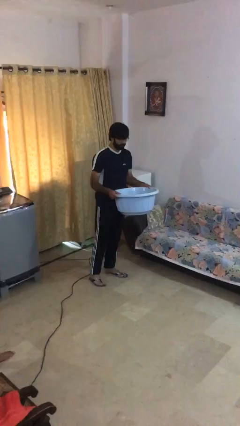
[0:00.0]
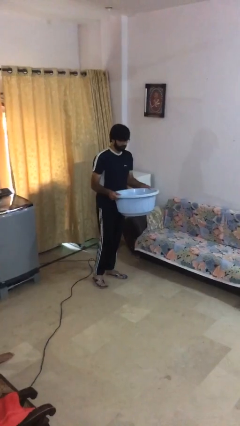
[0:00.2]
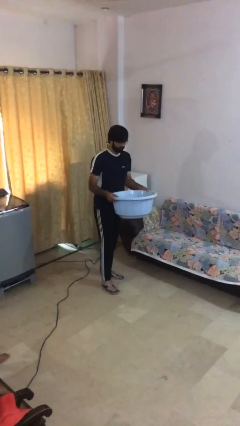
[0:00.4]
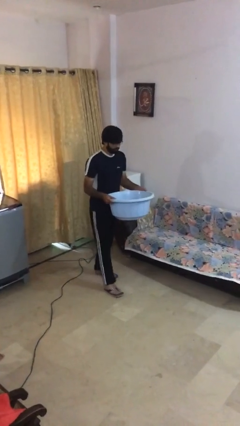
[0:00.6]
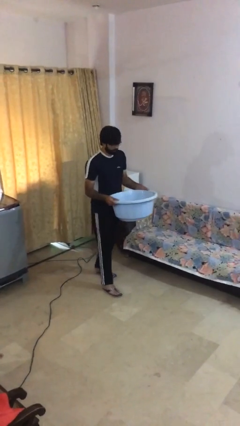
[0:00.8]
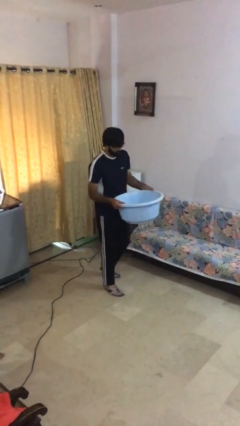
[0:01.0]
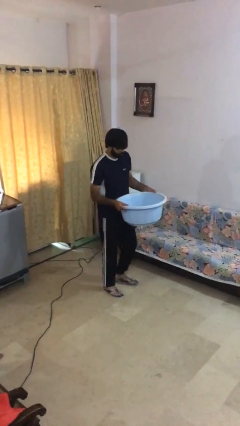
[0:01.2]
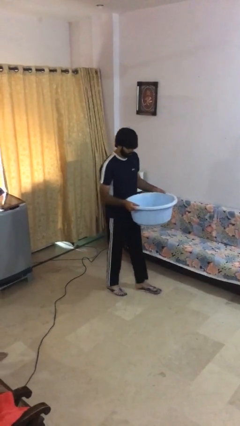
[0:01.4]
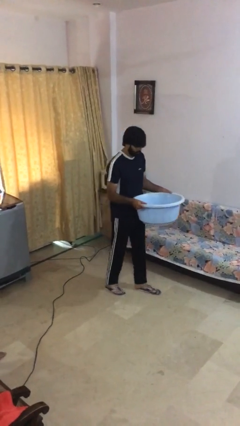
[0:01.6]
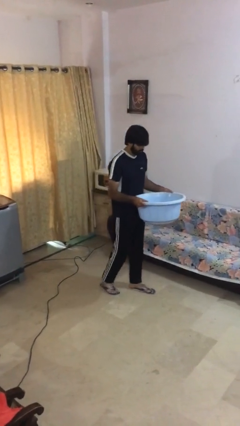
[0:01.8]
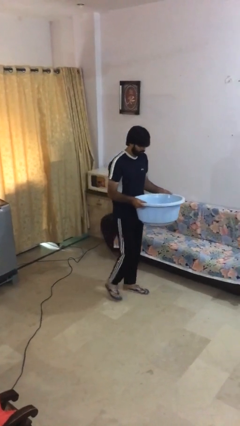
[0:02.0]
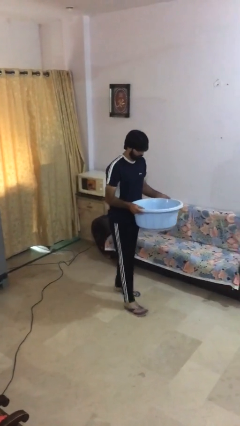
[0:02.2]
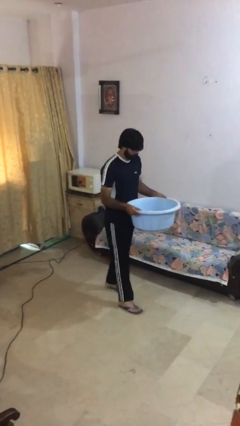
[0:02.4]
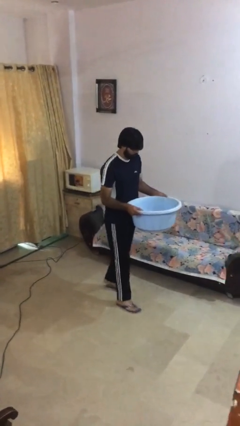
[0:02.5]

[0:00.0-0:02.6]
person carries heavy object

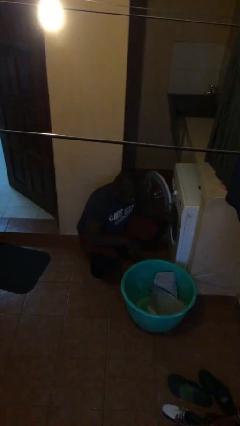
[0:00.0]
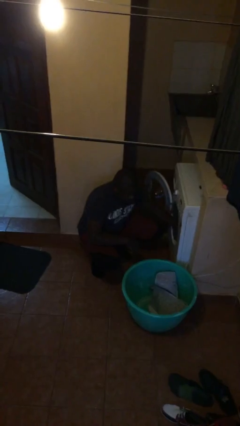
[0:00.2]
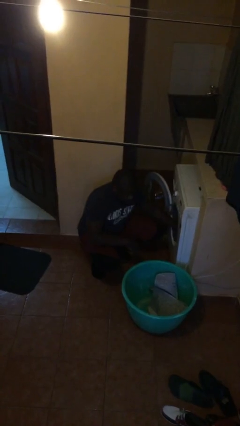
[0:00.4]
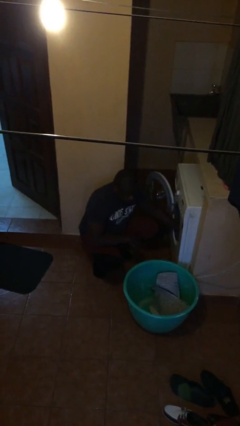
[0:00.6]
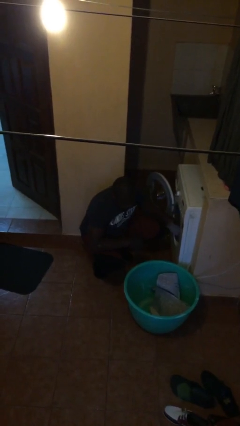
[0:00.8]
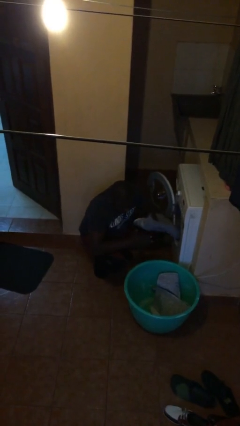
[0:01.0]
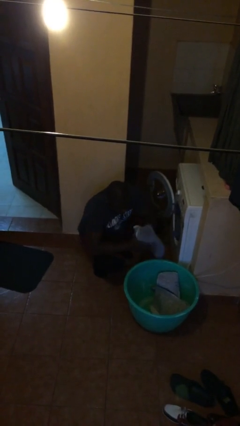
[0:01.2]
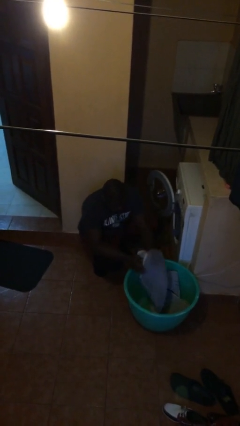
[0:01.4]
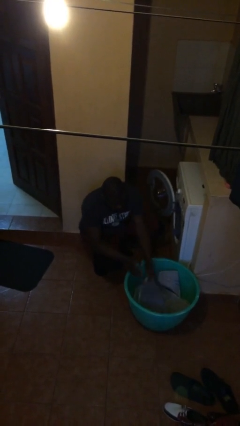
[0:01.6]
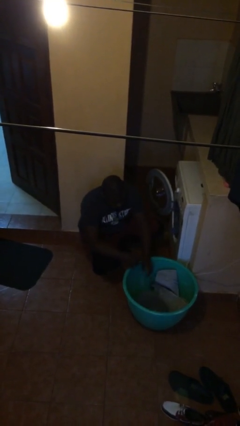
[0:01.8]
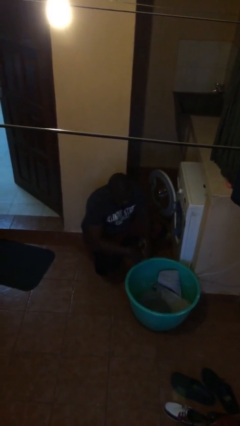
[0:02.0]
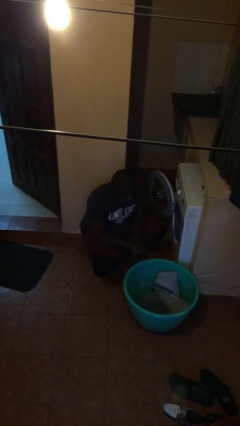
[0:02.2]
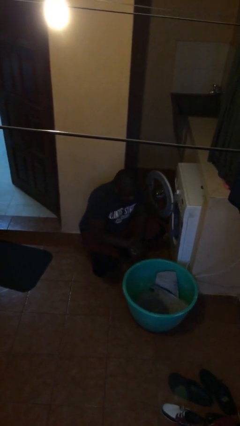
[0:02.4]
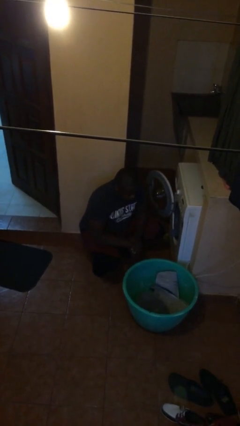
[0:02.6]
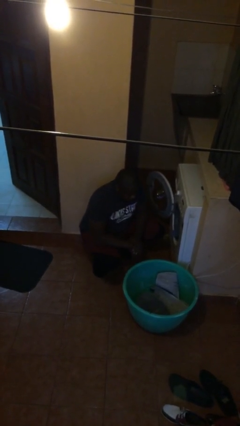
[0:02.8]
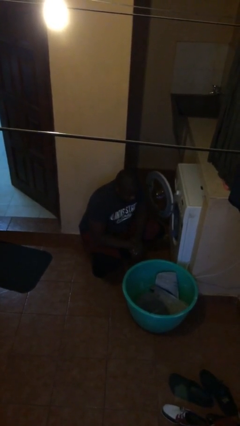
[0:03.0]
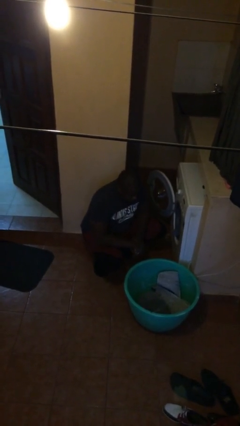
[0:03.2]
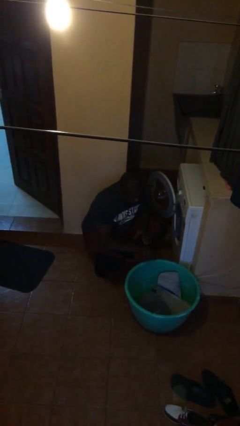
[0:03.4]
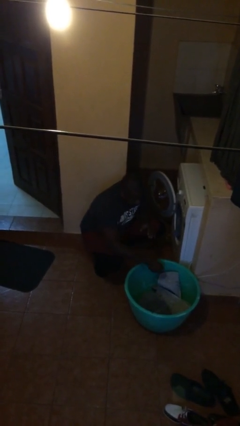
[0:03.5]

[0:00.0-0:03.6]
person unloads clotheswasher

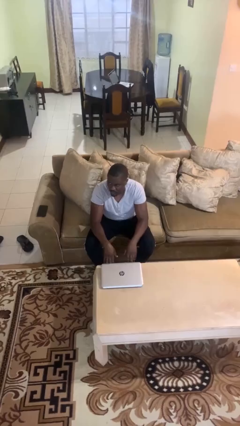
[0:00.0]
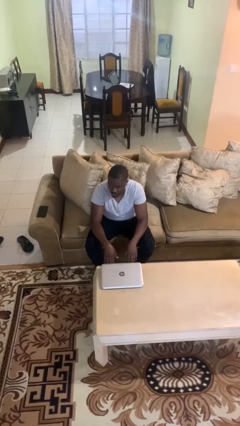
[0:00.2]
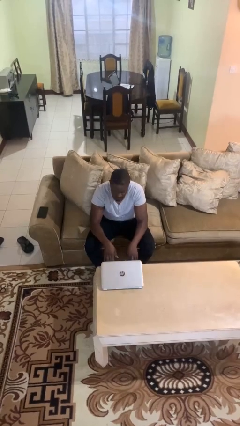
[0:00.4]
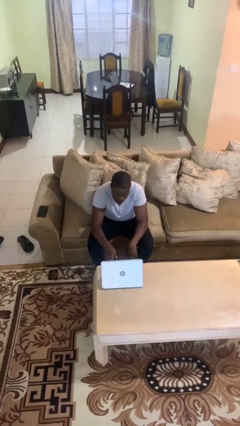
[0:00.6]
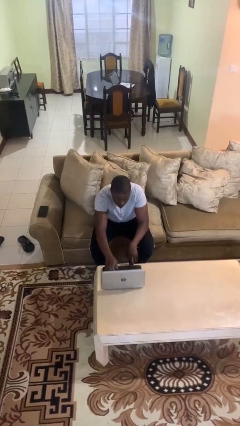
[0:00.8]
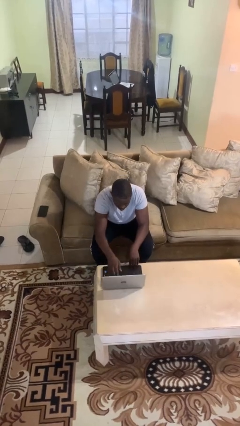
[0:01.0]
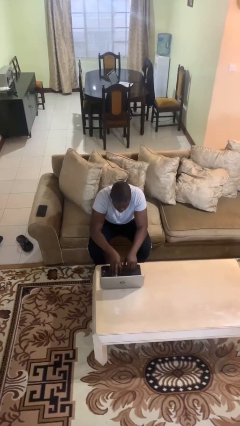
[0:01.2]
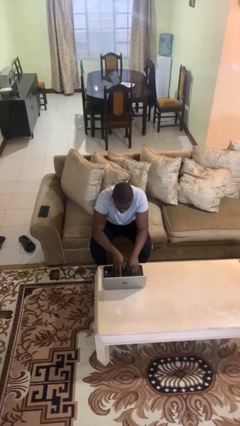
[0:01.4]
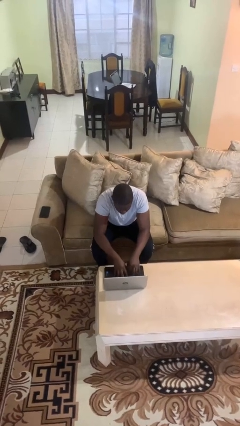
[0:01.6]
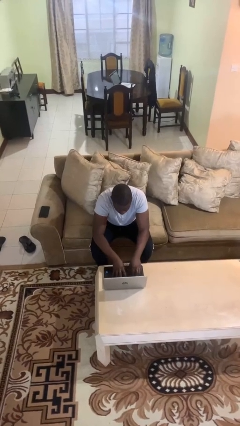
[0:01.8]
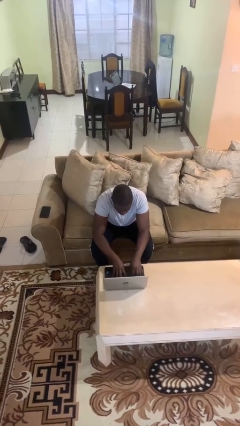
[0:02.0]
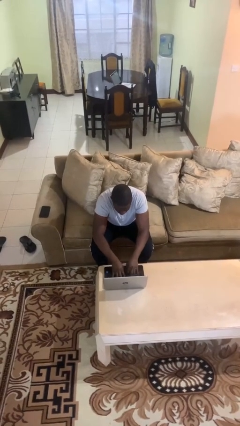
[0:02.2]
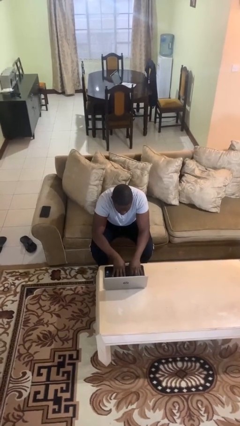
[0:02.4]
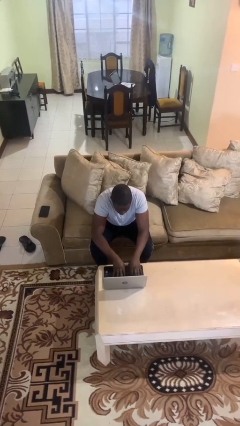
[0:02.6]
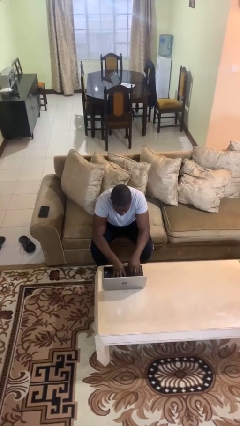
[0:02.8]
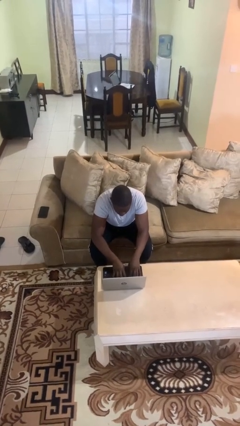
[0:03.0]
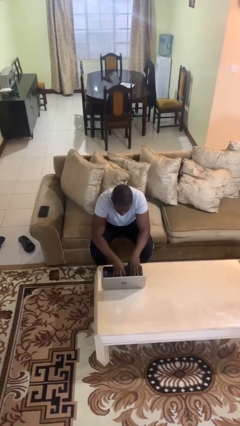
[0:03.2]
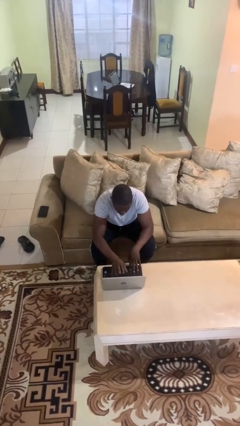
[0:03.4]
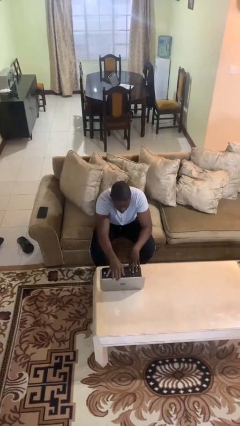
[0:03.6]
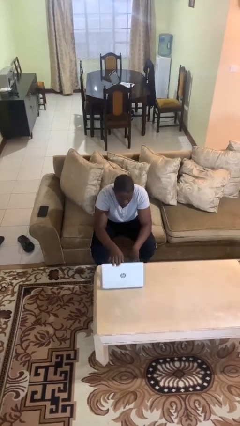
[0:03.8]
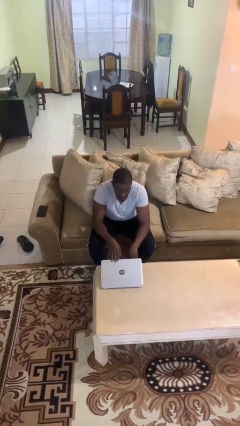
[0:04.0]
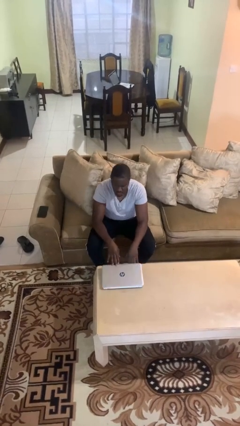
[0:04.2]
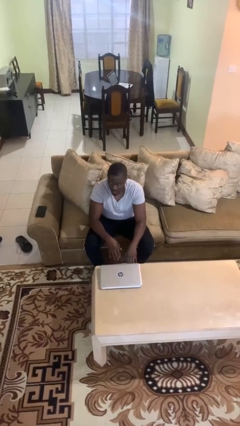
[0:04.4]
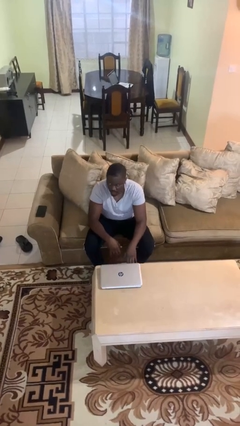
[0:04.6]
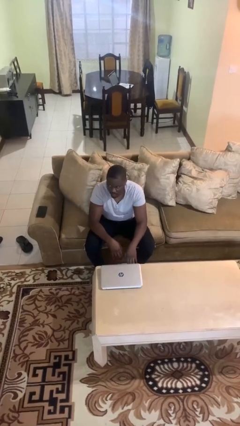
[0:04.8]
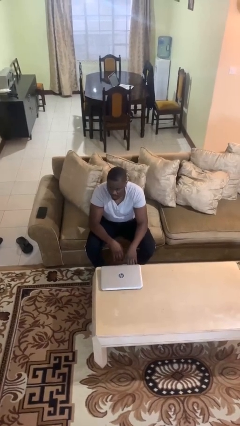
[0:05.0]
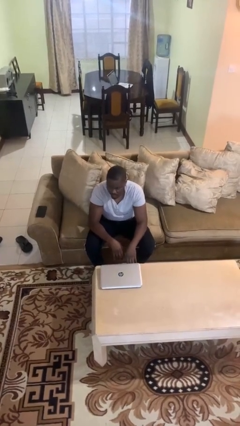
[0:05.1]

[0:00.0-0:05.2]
person interacts with laptop

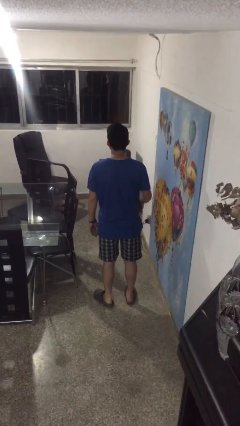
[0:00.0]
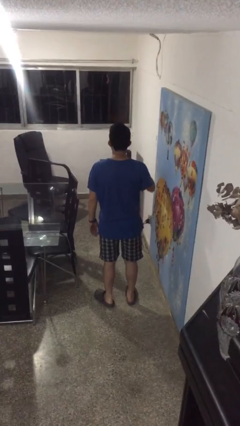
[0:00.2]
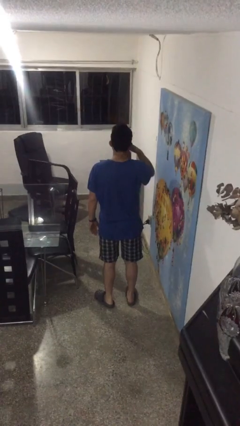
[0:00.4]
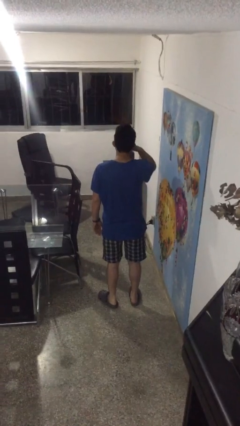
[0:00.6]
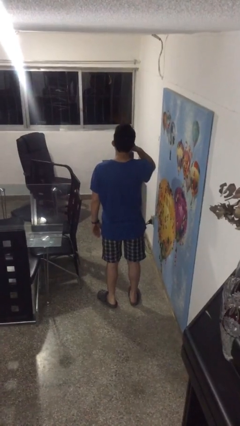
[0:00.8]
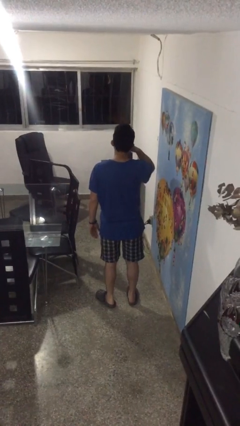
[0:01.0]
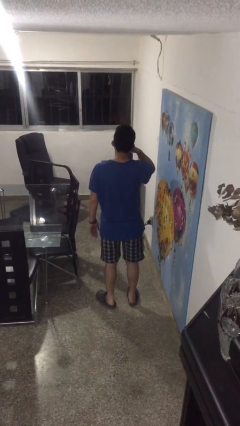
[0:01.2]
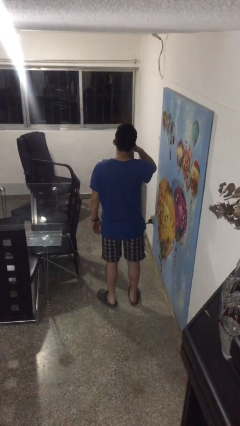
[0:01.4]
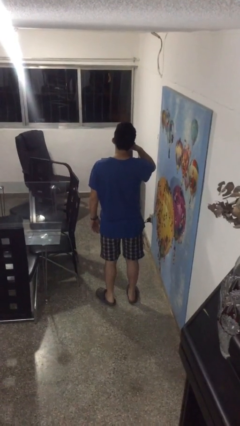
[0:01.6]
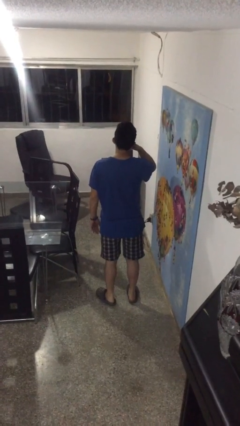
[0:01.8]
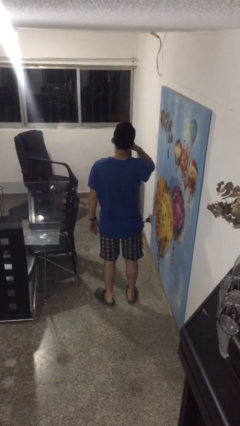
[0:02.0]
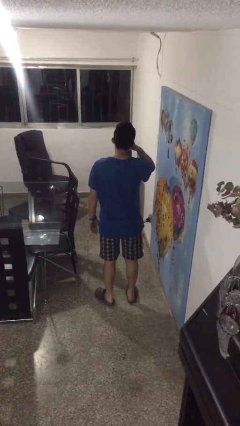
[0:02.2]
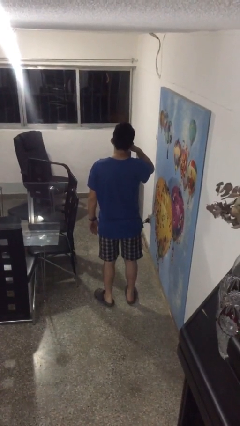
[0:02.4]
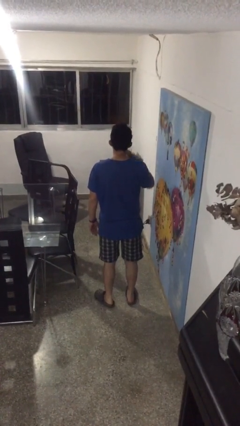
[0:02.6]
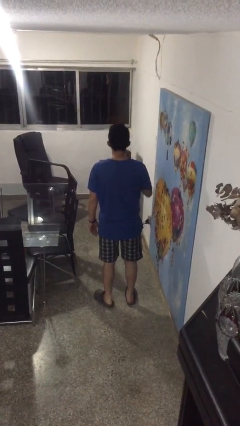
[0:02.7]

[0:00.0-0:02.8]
person gestures call me

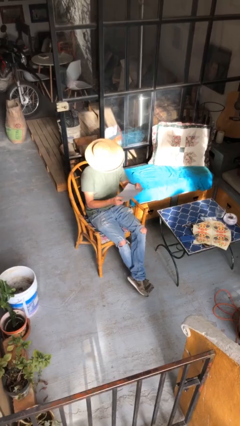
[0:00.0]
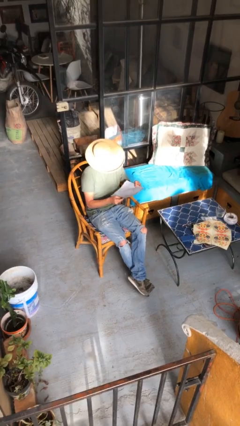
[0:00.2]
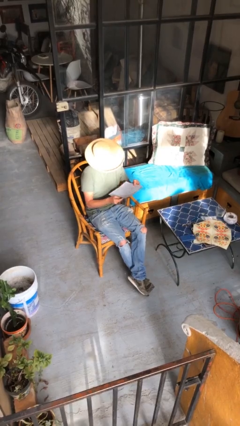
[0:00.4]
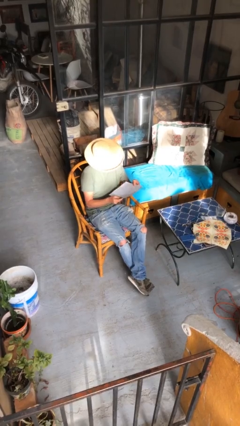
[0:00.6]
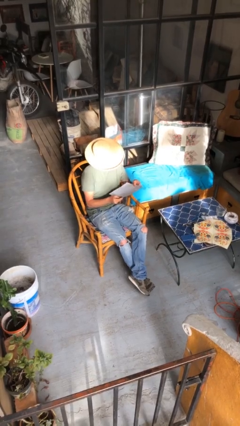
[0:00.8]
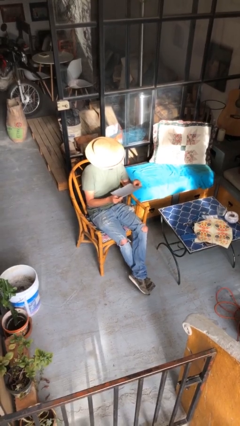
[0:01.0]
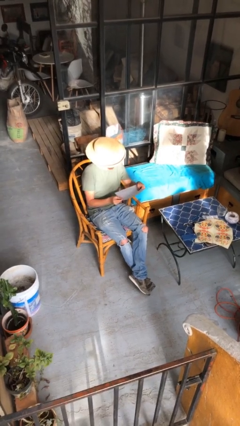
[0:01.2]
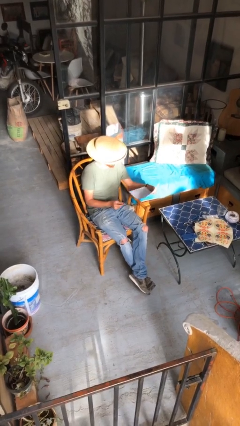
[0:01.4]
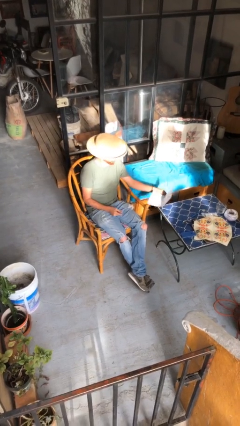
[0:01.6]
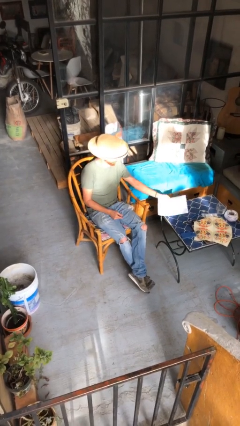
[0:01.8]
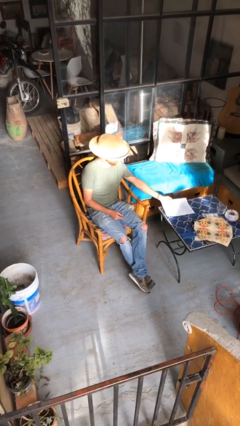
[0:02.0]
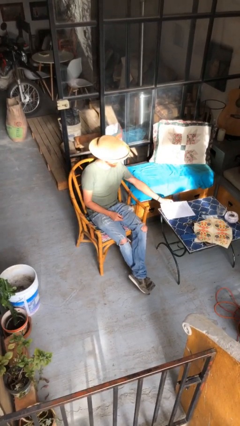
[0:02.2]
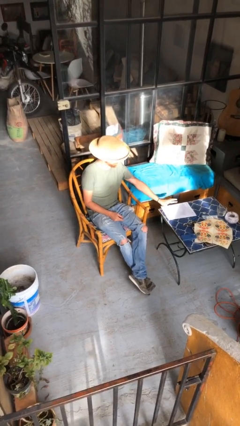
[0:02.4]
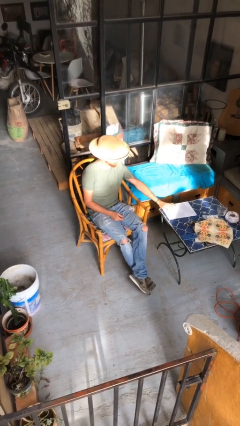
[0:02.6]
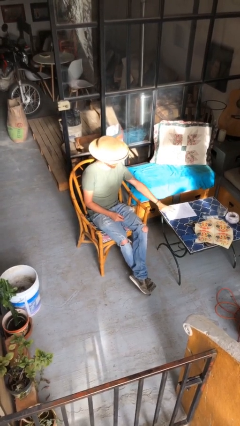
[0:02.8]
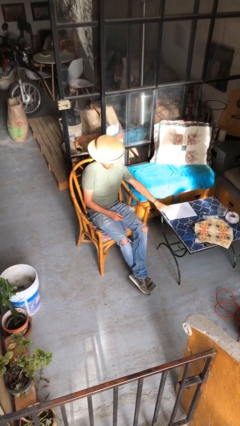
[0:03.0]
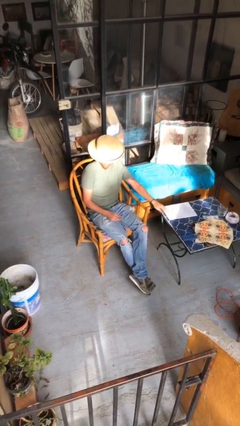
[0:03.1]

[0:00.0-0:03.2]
person puts down object on table

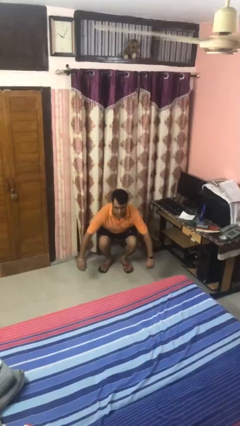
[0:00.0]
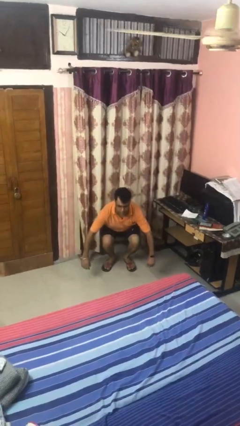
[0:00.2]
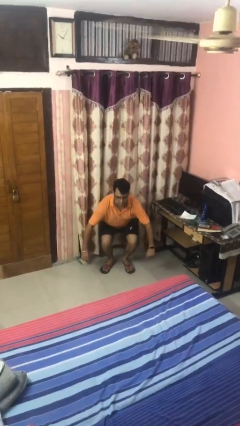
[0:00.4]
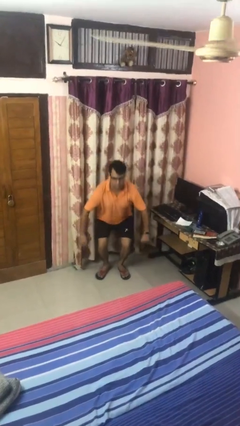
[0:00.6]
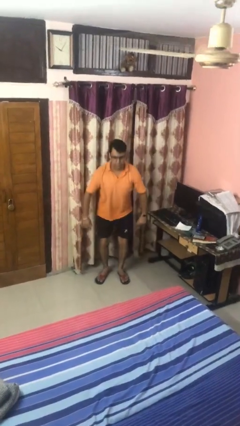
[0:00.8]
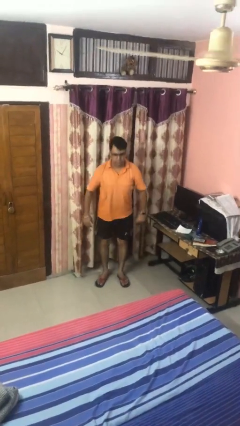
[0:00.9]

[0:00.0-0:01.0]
person stands up
